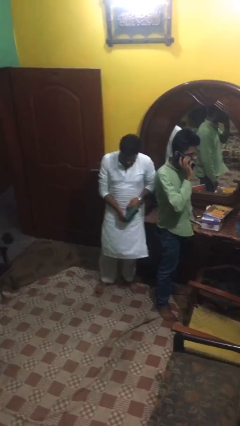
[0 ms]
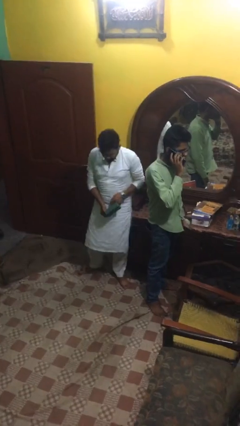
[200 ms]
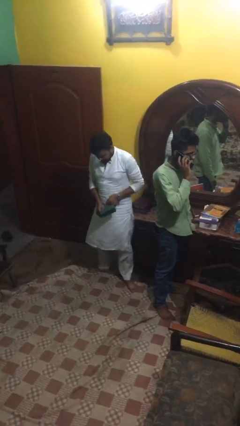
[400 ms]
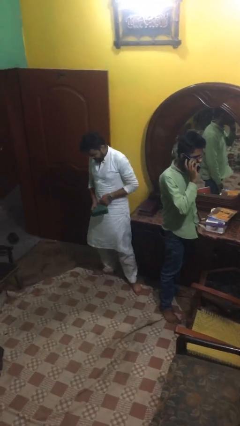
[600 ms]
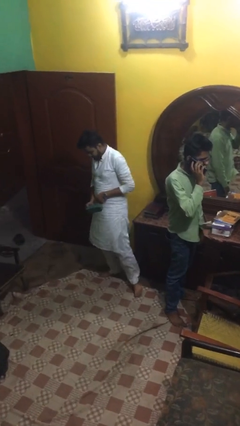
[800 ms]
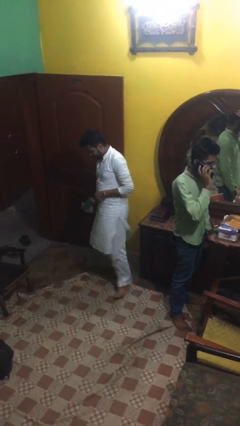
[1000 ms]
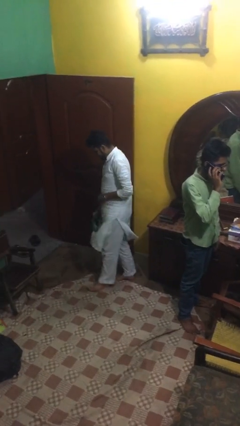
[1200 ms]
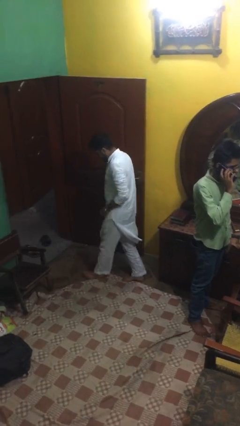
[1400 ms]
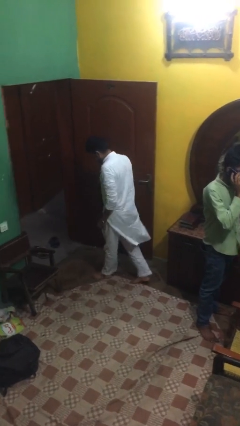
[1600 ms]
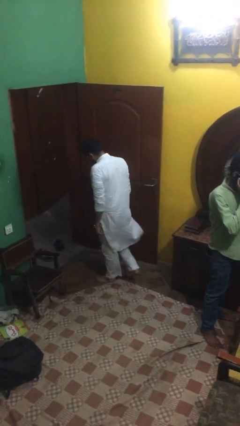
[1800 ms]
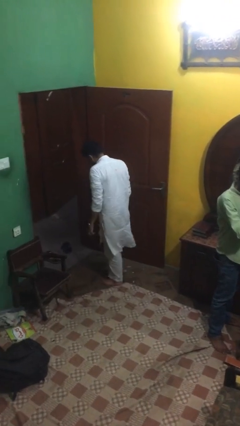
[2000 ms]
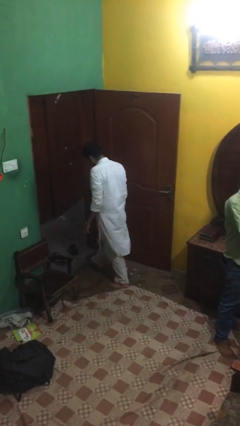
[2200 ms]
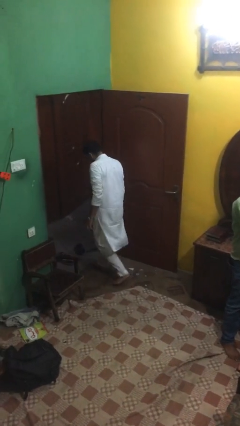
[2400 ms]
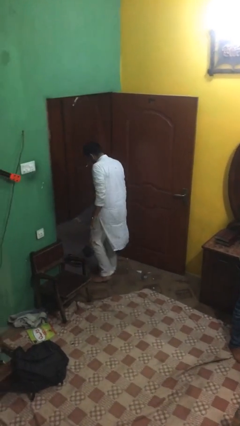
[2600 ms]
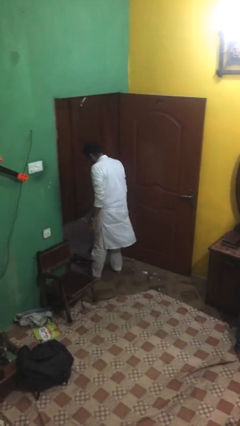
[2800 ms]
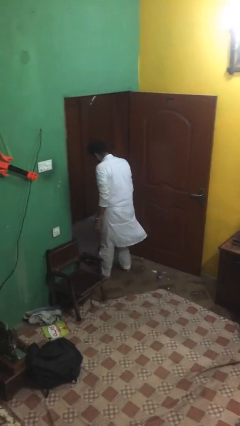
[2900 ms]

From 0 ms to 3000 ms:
person steals object from person

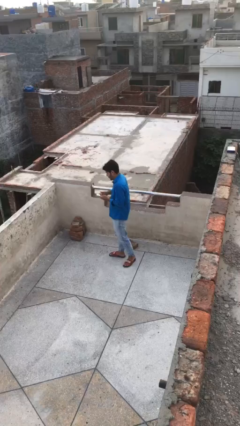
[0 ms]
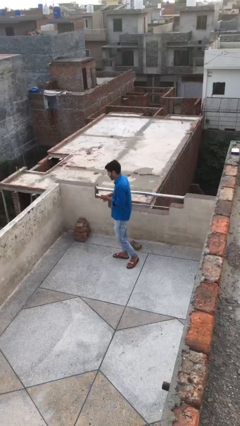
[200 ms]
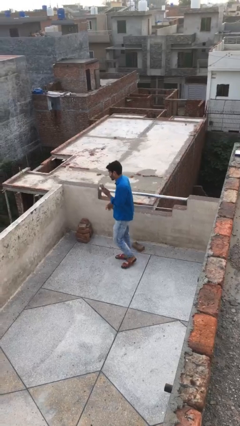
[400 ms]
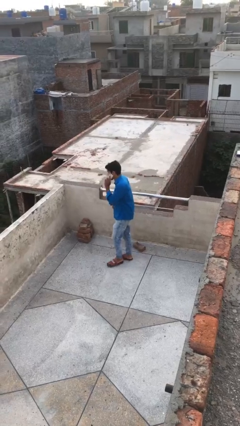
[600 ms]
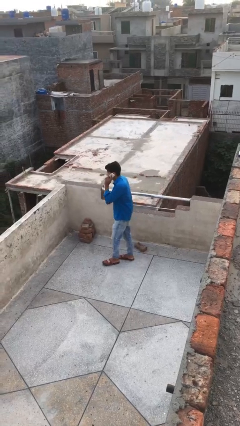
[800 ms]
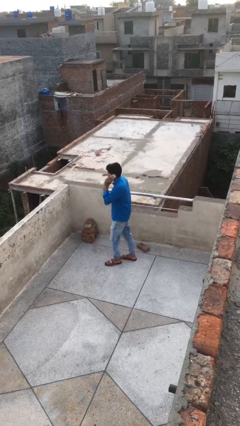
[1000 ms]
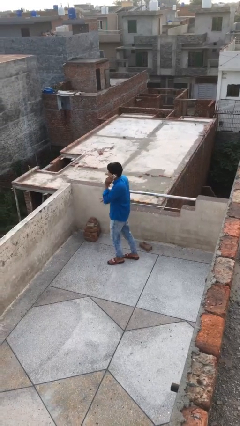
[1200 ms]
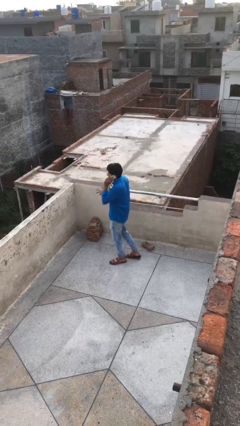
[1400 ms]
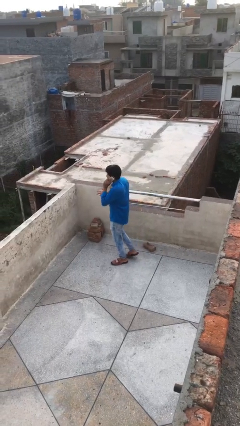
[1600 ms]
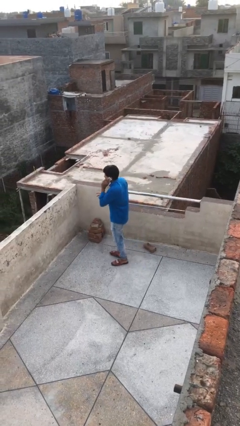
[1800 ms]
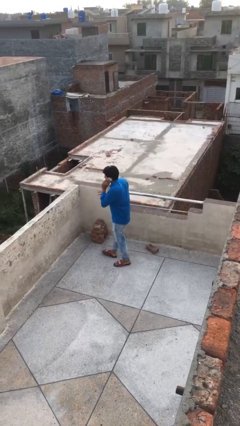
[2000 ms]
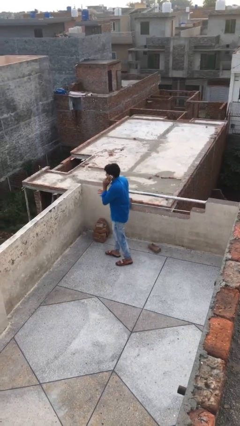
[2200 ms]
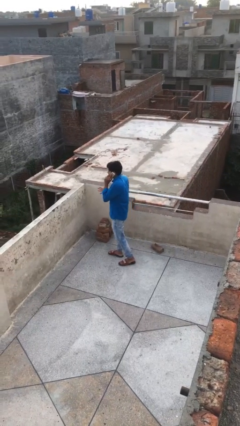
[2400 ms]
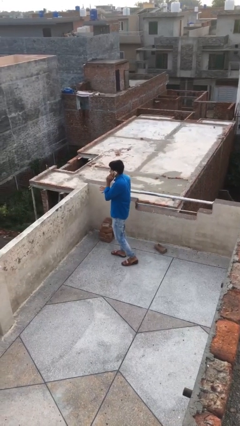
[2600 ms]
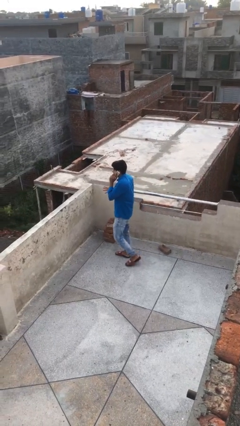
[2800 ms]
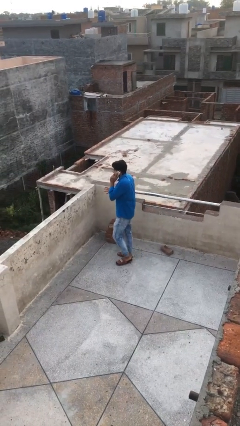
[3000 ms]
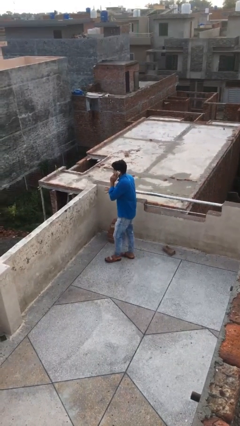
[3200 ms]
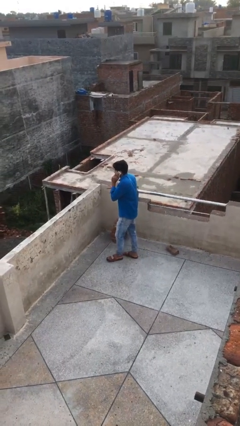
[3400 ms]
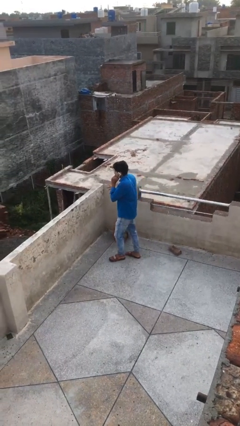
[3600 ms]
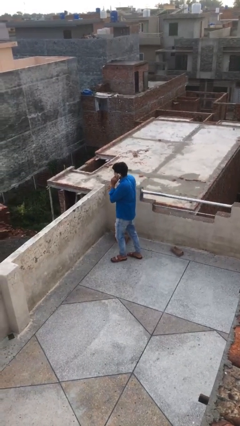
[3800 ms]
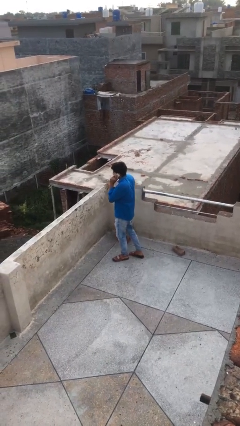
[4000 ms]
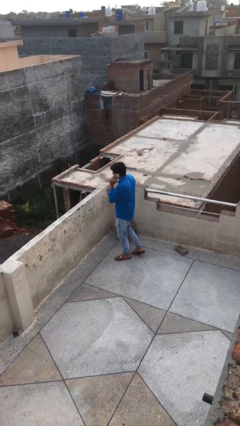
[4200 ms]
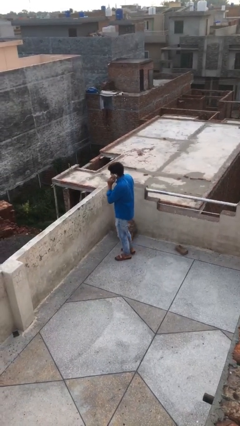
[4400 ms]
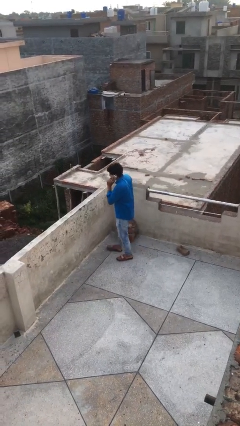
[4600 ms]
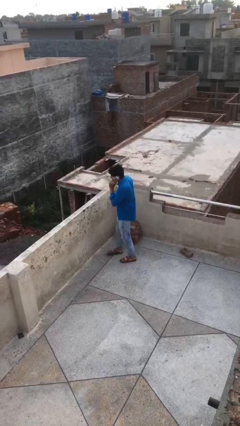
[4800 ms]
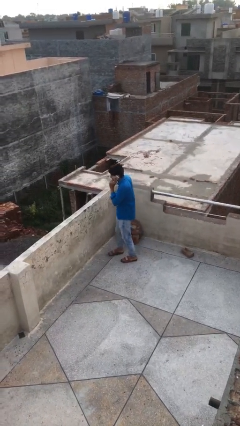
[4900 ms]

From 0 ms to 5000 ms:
person talks on phone

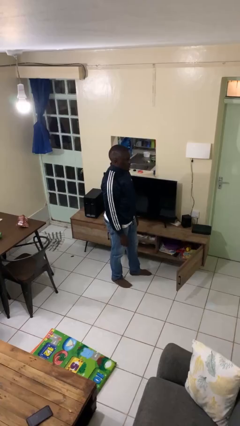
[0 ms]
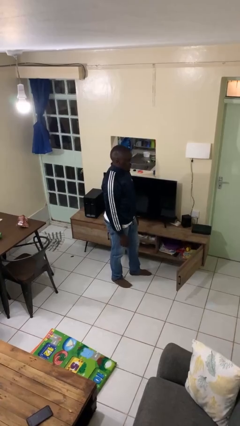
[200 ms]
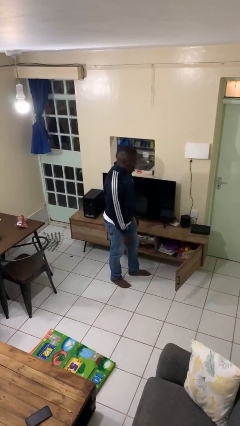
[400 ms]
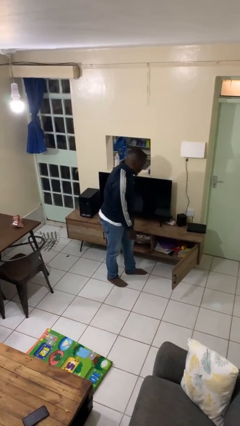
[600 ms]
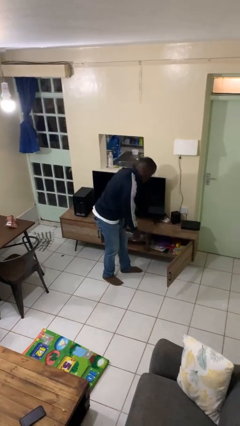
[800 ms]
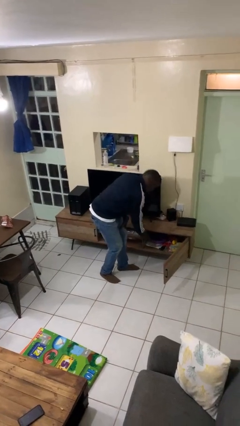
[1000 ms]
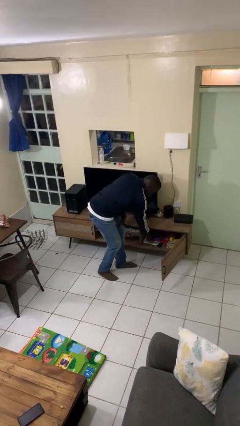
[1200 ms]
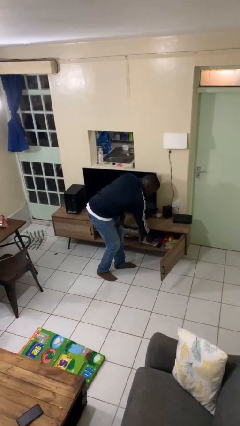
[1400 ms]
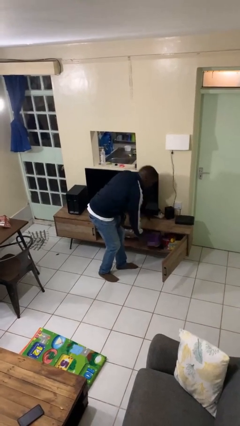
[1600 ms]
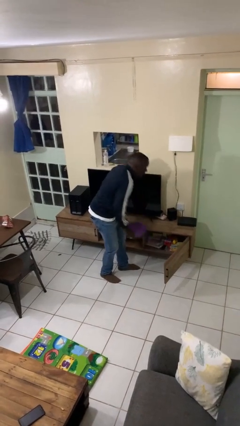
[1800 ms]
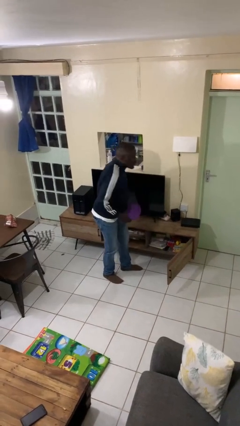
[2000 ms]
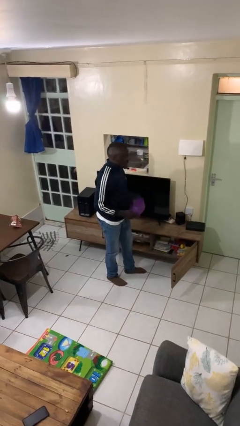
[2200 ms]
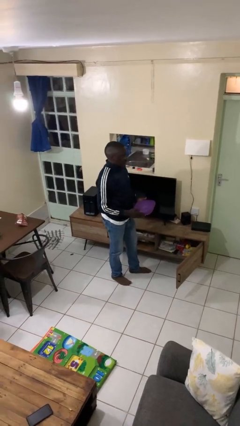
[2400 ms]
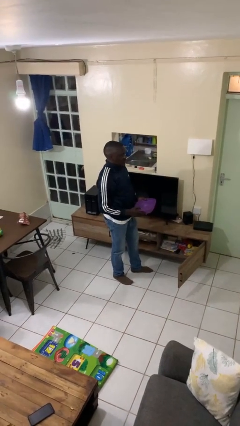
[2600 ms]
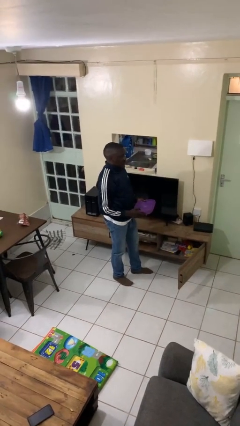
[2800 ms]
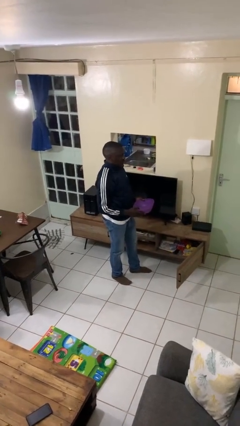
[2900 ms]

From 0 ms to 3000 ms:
person picks up object from cabinet

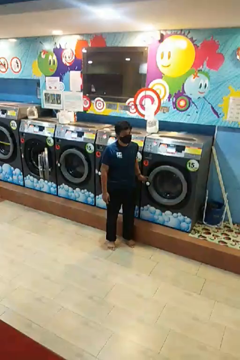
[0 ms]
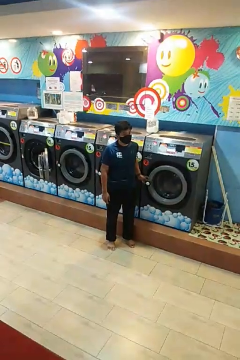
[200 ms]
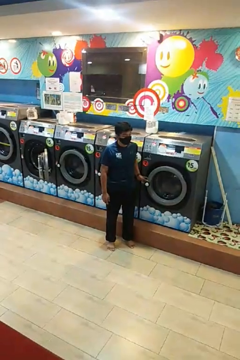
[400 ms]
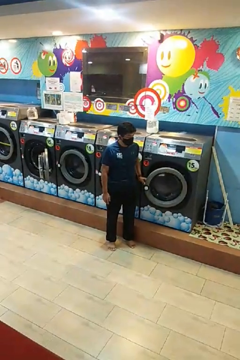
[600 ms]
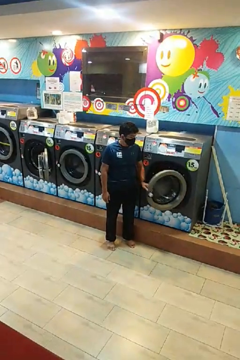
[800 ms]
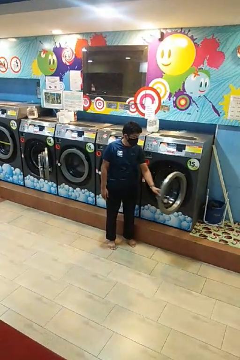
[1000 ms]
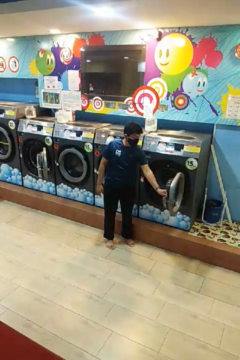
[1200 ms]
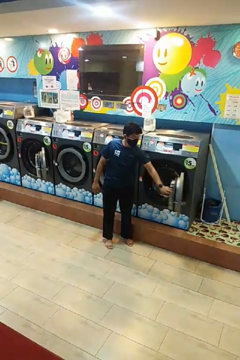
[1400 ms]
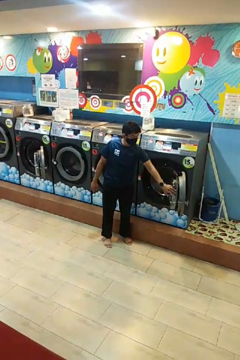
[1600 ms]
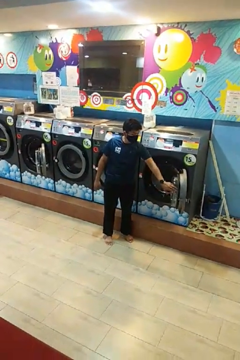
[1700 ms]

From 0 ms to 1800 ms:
person opens clothes washer

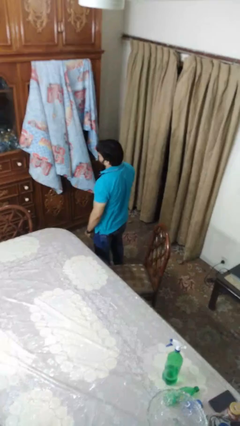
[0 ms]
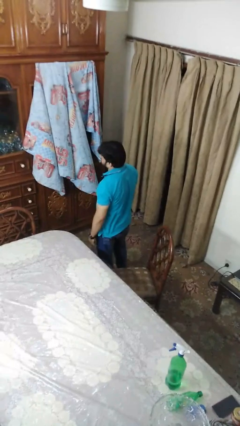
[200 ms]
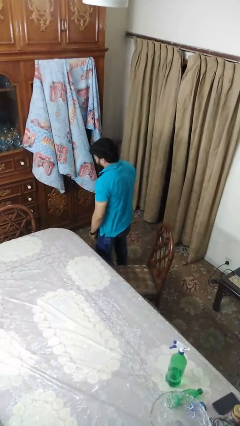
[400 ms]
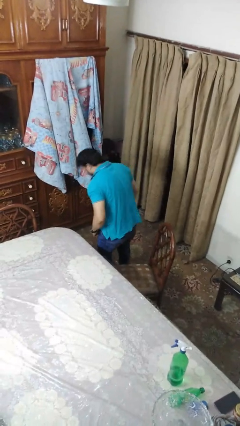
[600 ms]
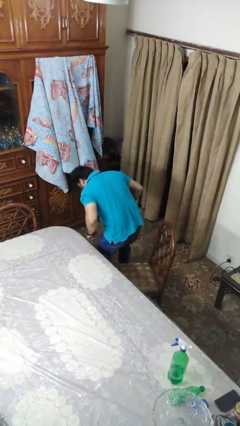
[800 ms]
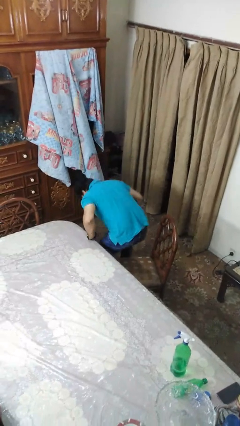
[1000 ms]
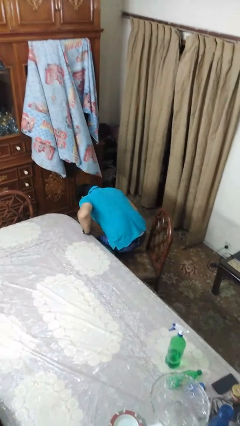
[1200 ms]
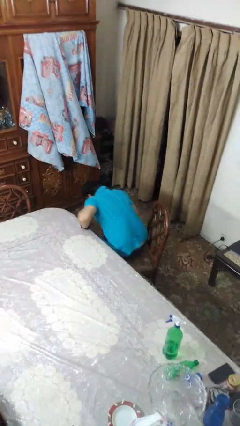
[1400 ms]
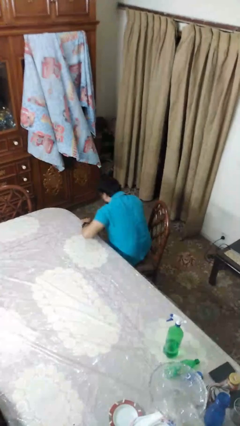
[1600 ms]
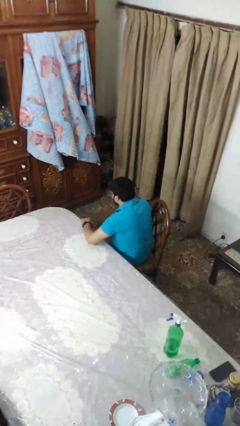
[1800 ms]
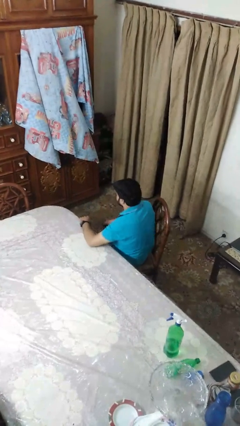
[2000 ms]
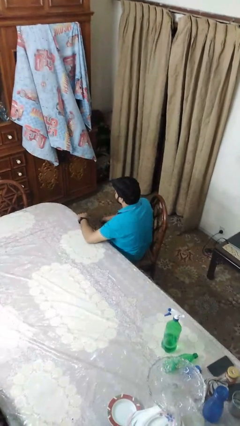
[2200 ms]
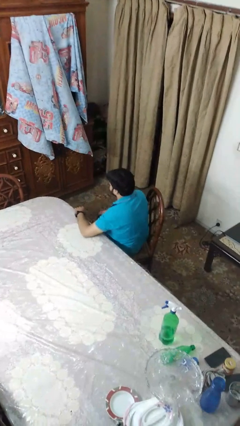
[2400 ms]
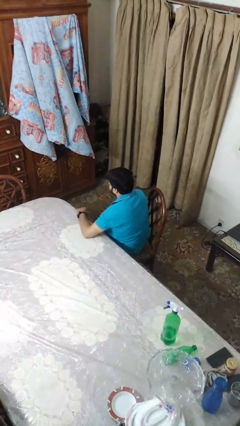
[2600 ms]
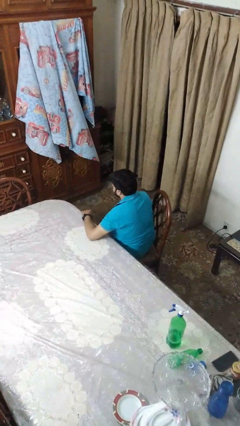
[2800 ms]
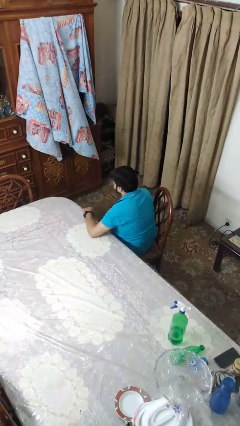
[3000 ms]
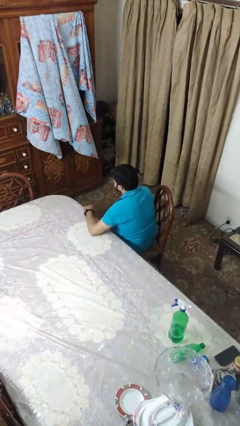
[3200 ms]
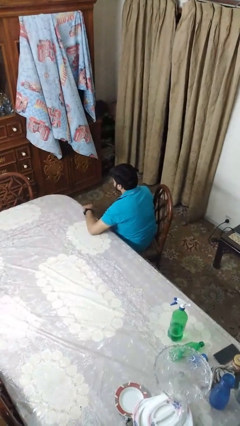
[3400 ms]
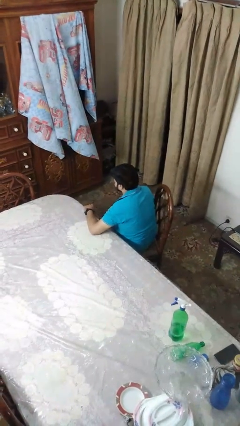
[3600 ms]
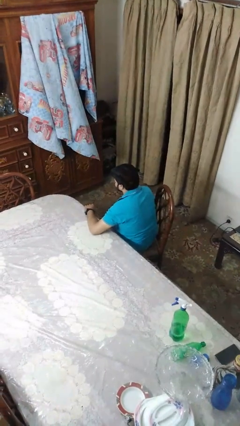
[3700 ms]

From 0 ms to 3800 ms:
person sits down

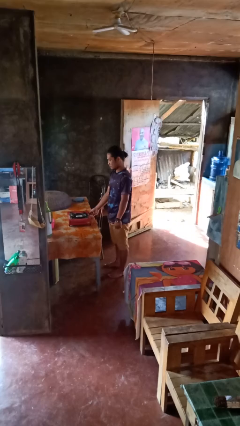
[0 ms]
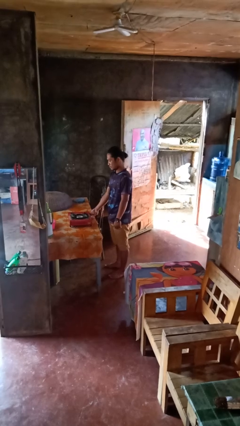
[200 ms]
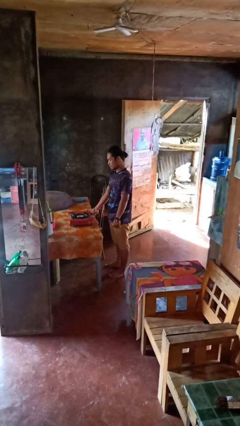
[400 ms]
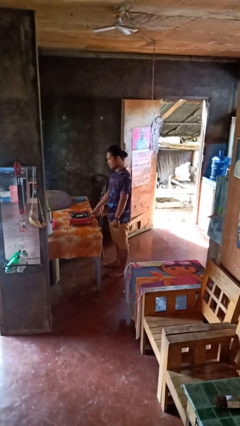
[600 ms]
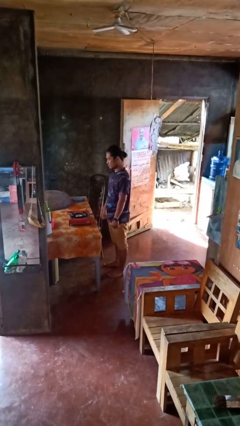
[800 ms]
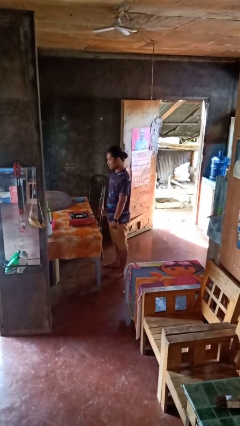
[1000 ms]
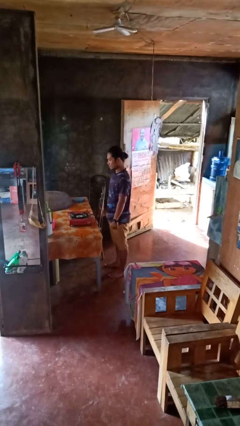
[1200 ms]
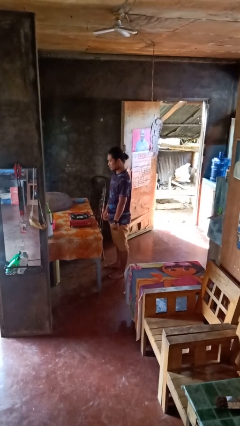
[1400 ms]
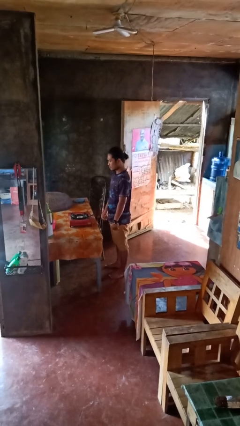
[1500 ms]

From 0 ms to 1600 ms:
person turns off stovetop
